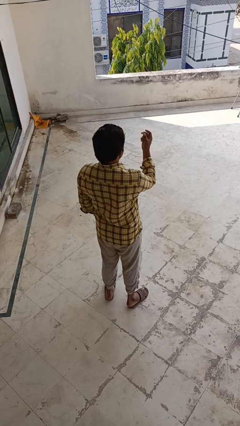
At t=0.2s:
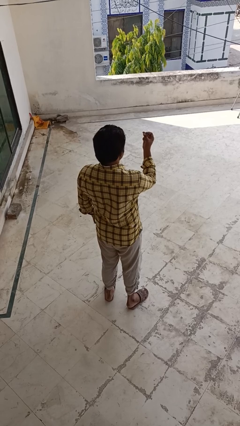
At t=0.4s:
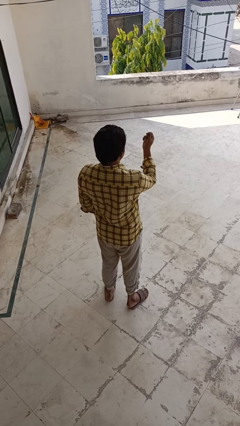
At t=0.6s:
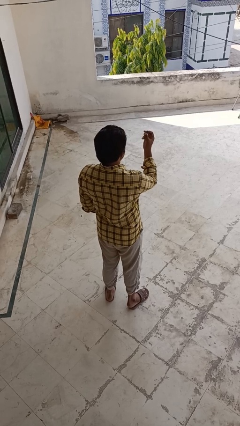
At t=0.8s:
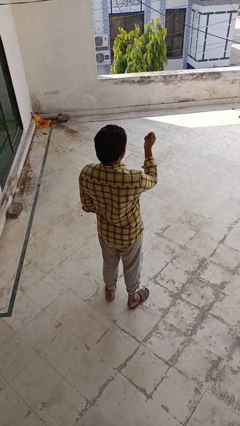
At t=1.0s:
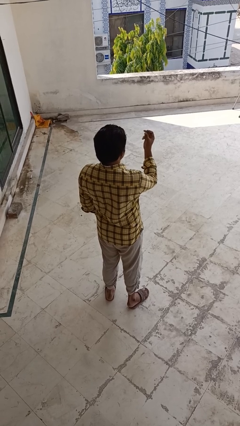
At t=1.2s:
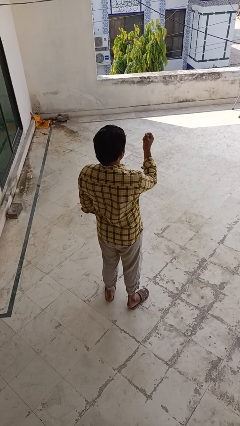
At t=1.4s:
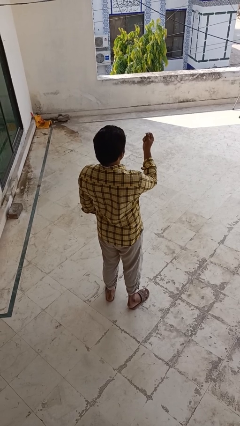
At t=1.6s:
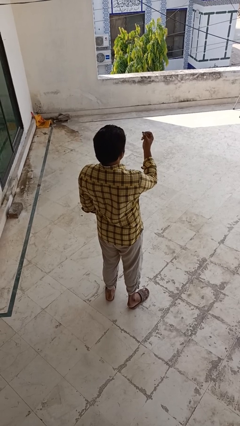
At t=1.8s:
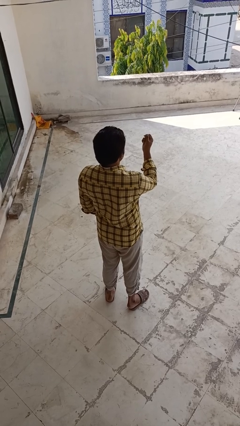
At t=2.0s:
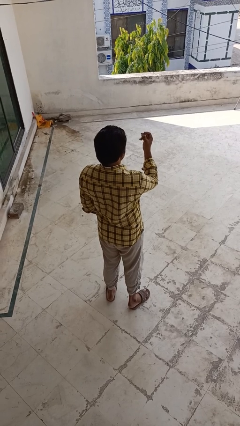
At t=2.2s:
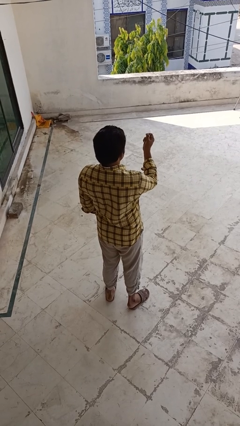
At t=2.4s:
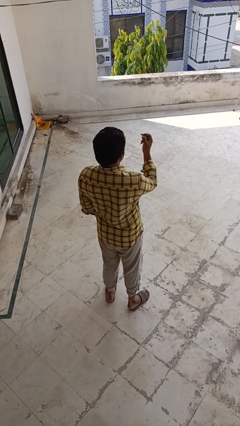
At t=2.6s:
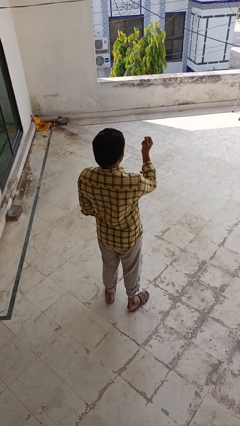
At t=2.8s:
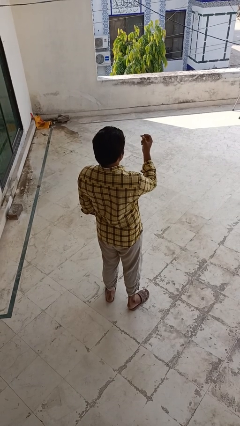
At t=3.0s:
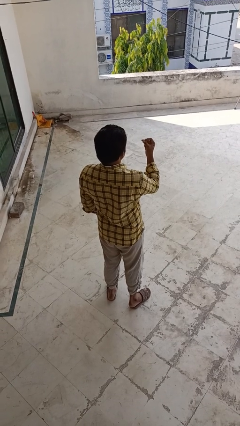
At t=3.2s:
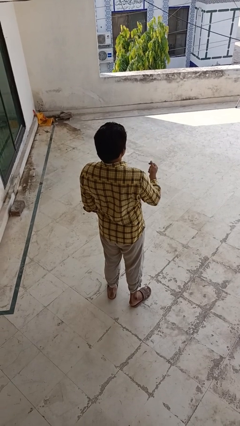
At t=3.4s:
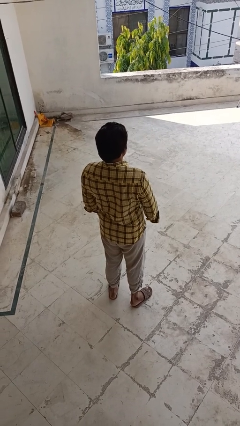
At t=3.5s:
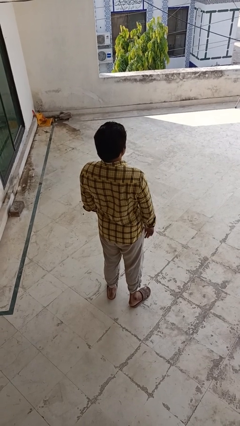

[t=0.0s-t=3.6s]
person snaps fingers

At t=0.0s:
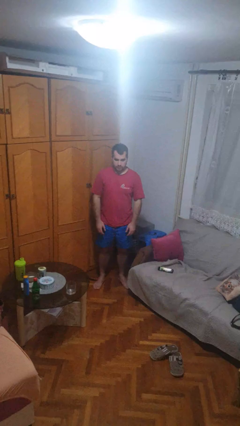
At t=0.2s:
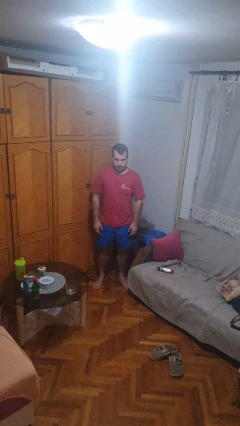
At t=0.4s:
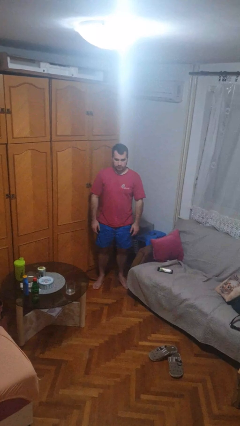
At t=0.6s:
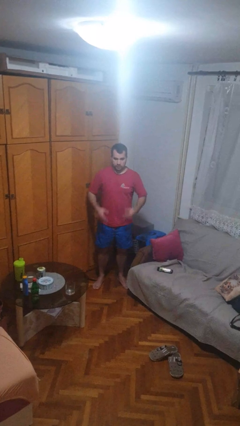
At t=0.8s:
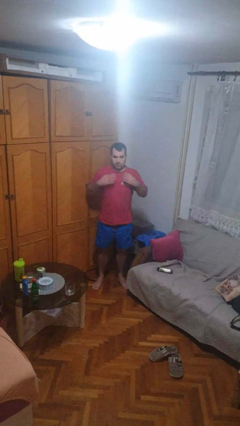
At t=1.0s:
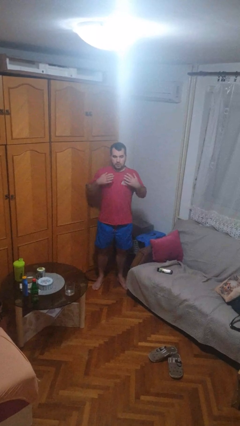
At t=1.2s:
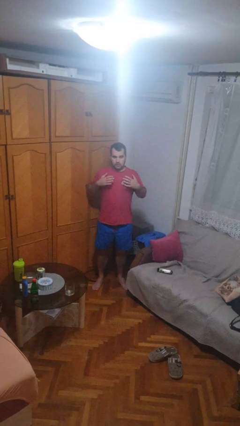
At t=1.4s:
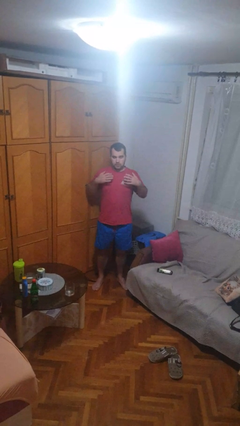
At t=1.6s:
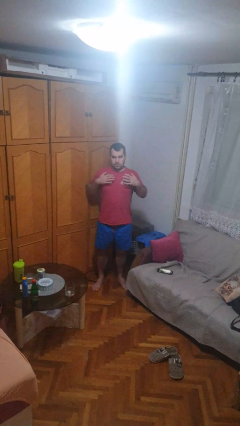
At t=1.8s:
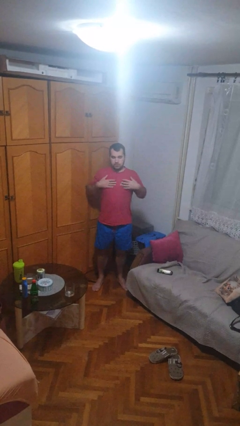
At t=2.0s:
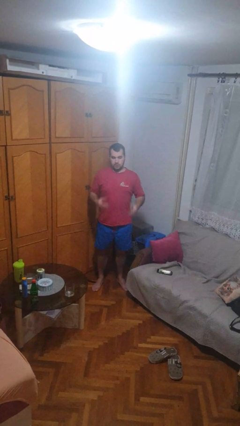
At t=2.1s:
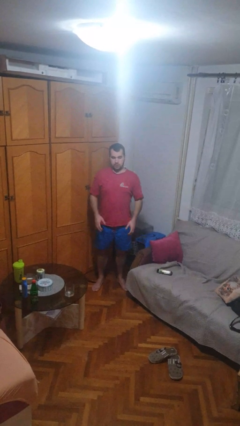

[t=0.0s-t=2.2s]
person drums on chest

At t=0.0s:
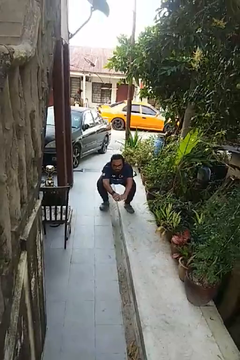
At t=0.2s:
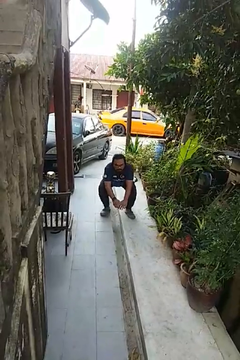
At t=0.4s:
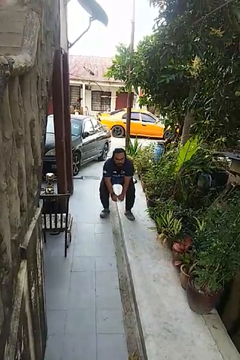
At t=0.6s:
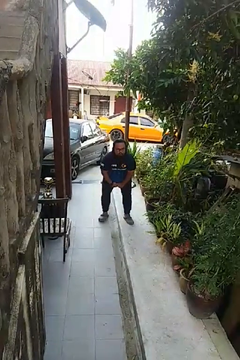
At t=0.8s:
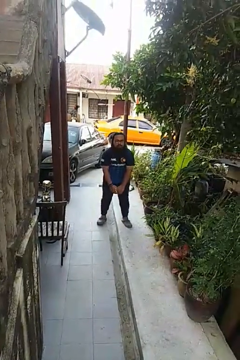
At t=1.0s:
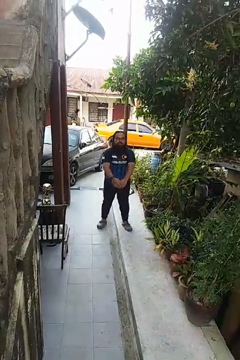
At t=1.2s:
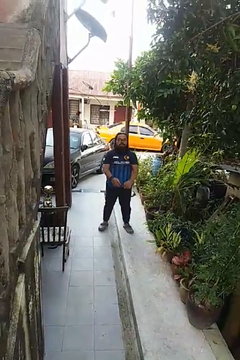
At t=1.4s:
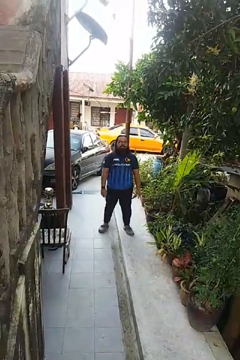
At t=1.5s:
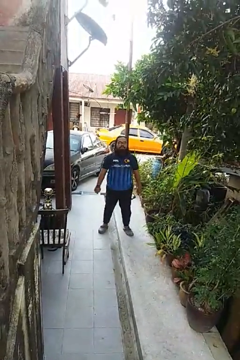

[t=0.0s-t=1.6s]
person stands up

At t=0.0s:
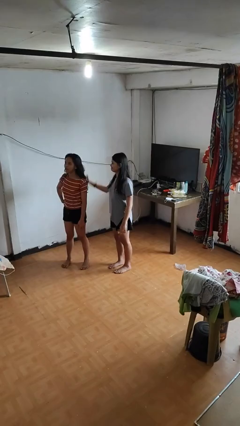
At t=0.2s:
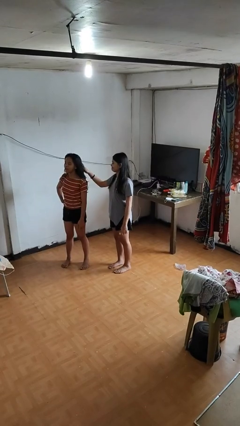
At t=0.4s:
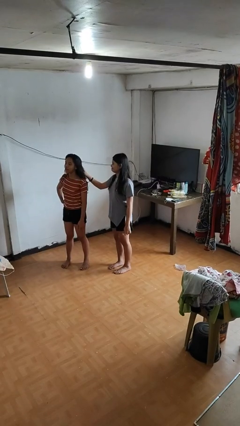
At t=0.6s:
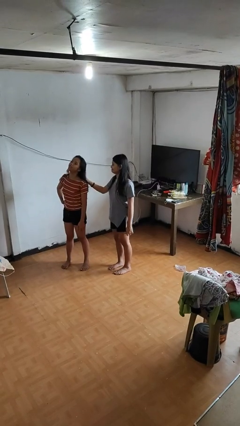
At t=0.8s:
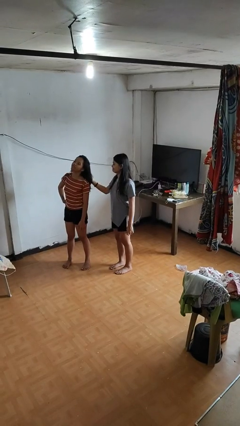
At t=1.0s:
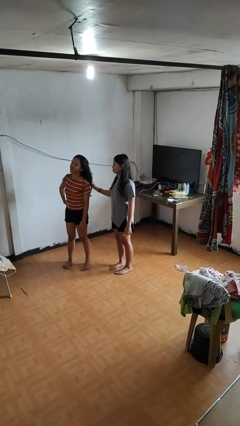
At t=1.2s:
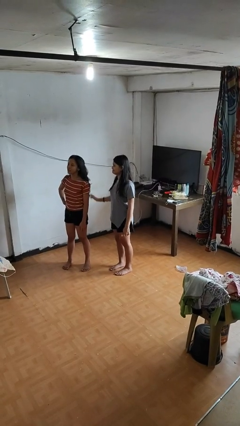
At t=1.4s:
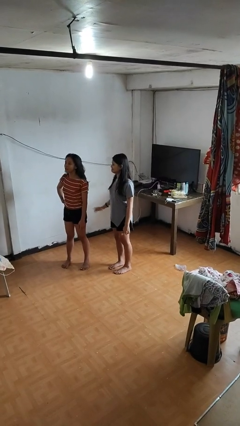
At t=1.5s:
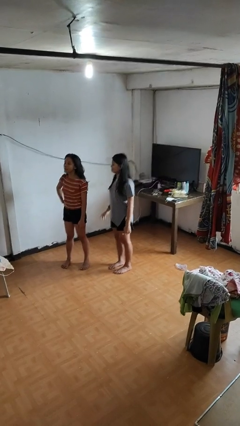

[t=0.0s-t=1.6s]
person grabs person by hair

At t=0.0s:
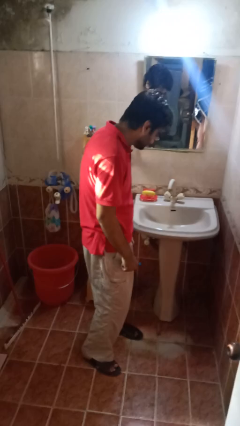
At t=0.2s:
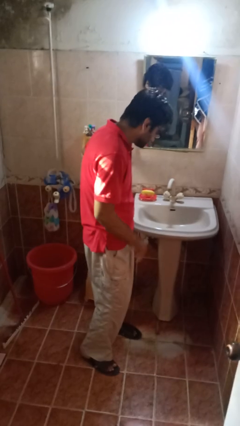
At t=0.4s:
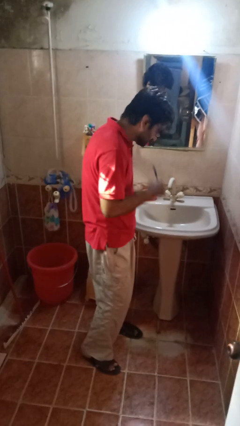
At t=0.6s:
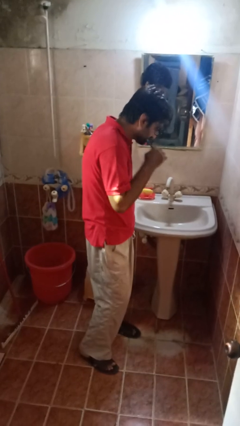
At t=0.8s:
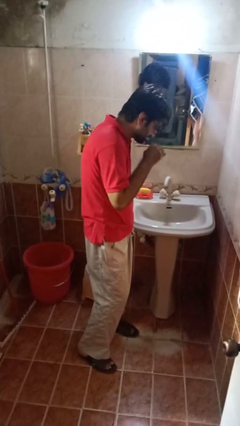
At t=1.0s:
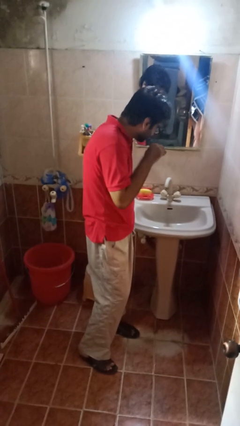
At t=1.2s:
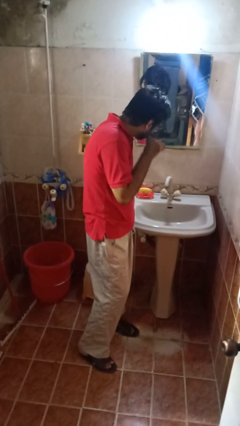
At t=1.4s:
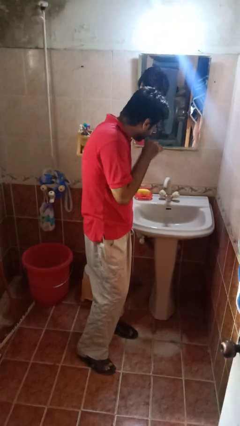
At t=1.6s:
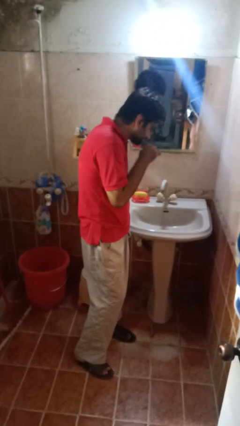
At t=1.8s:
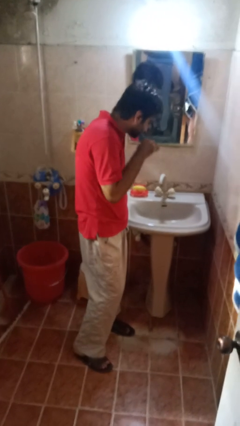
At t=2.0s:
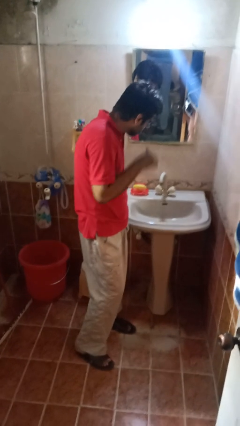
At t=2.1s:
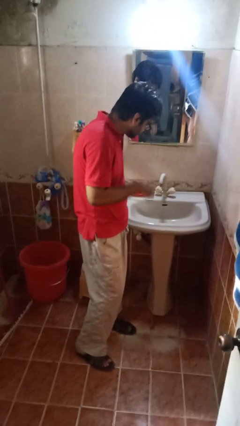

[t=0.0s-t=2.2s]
person brushes teeth

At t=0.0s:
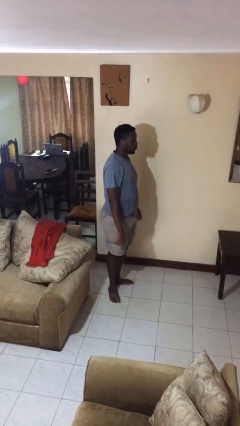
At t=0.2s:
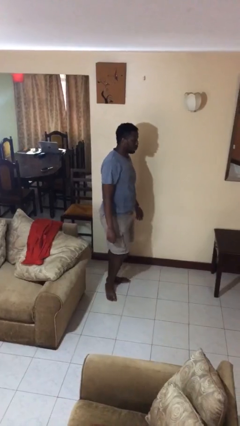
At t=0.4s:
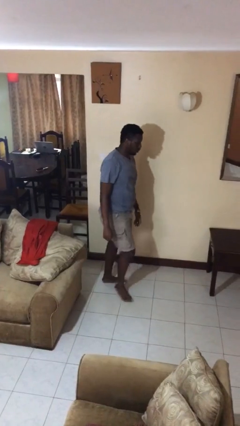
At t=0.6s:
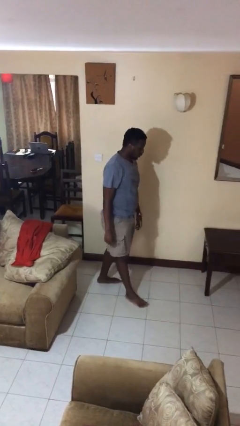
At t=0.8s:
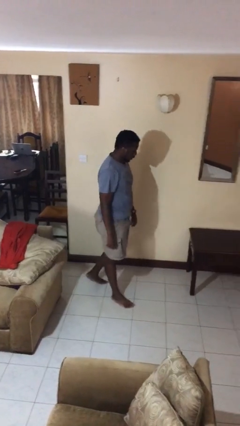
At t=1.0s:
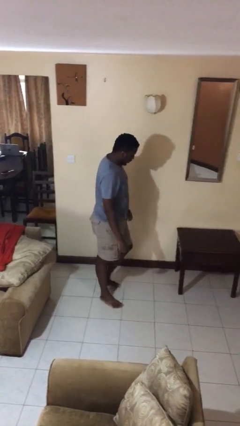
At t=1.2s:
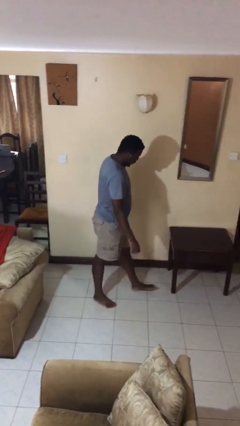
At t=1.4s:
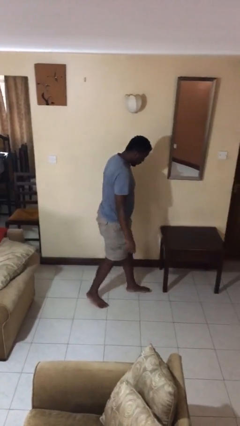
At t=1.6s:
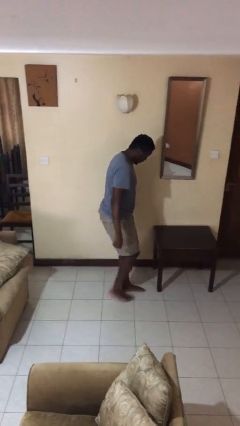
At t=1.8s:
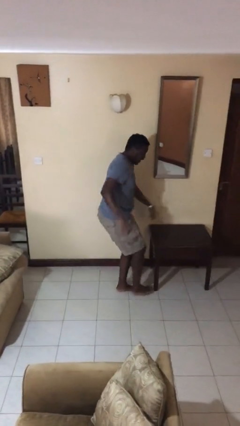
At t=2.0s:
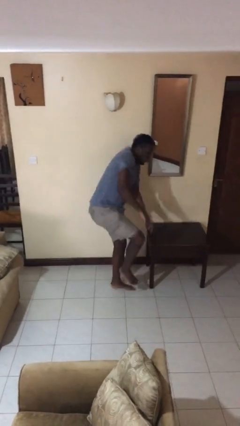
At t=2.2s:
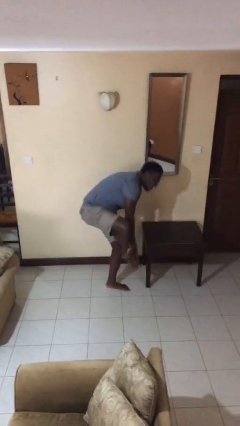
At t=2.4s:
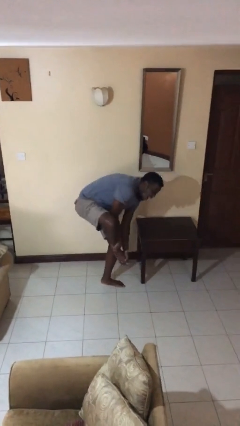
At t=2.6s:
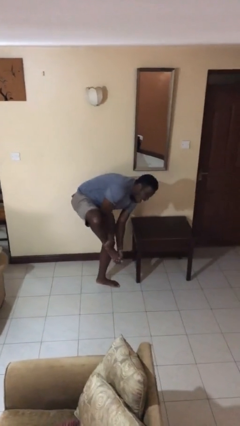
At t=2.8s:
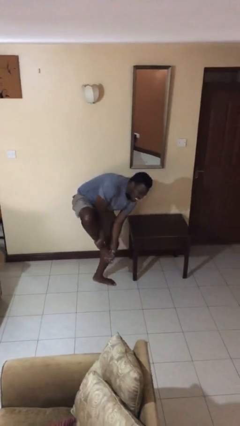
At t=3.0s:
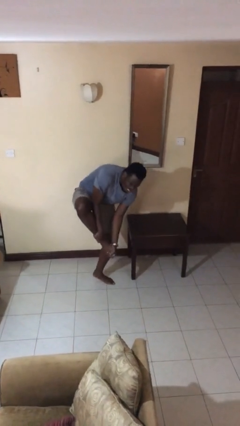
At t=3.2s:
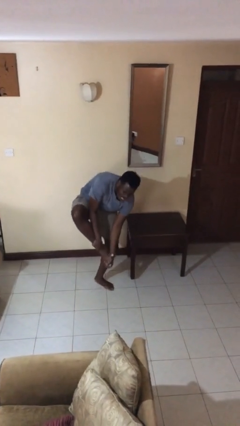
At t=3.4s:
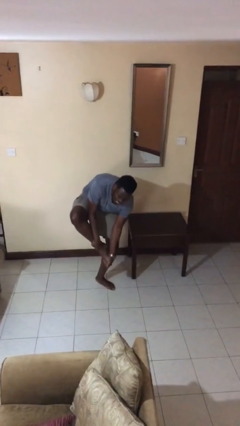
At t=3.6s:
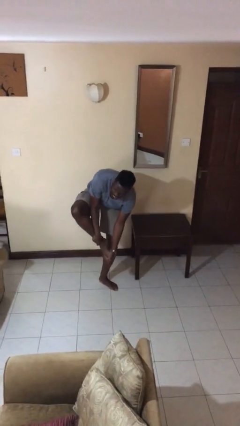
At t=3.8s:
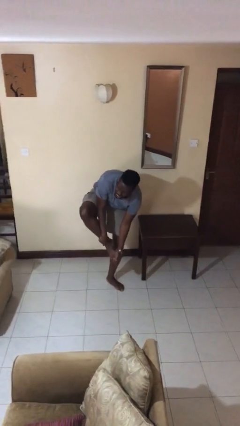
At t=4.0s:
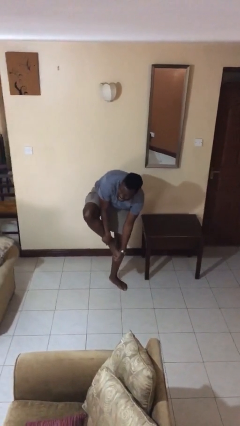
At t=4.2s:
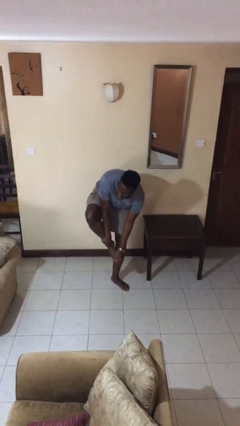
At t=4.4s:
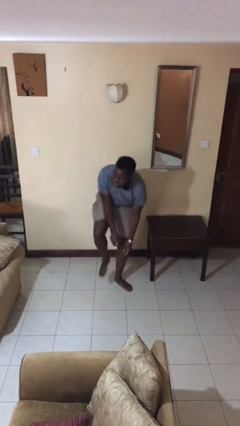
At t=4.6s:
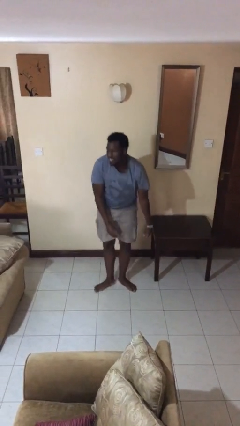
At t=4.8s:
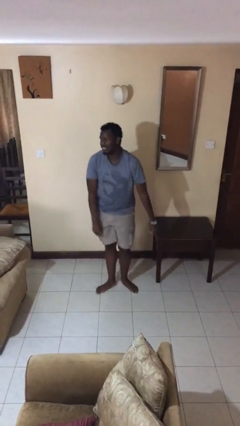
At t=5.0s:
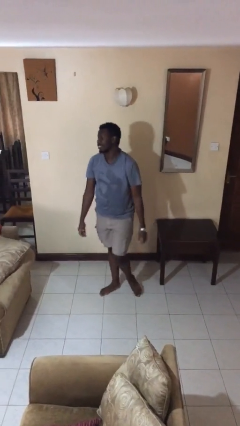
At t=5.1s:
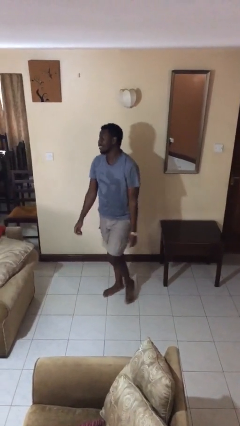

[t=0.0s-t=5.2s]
person stubs toe

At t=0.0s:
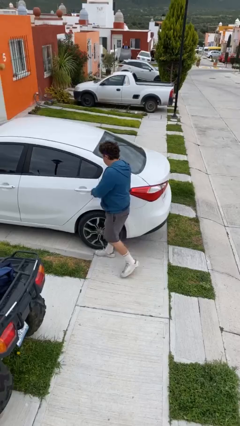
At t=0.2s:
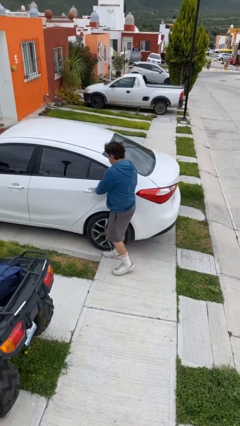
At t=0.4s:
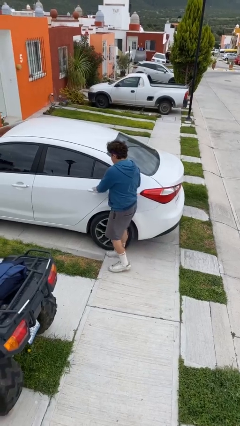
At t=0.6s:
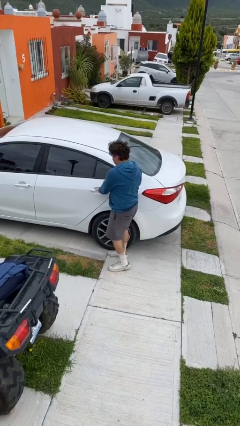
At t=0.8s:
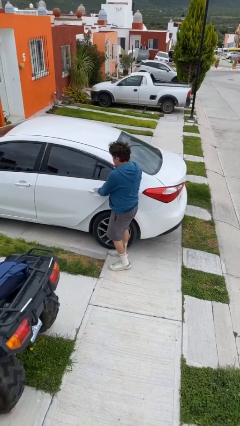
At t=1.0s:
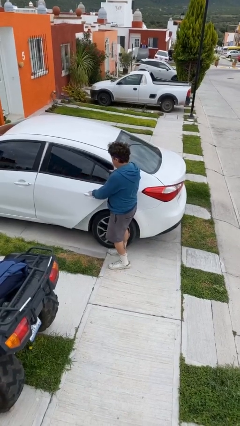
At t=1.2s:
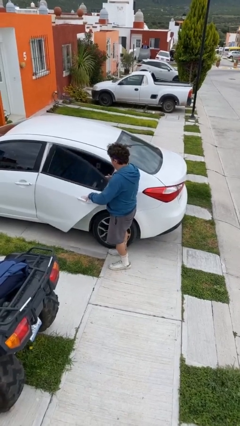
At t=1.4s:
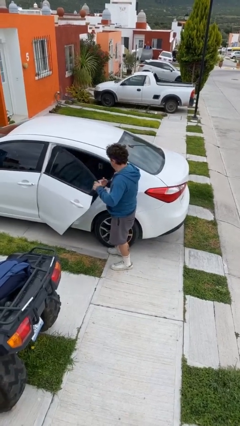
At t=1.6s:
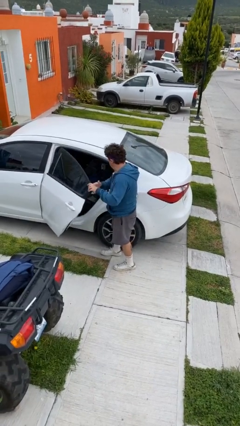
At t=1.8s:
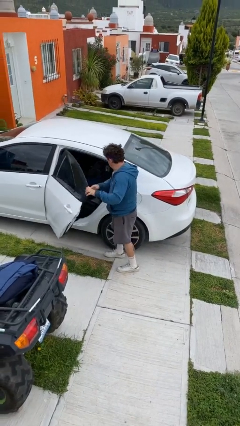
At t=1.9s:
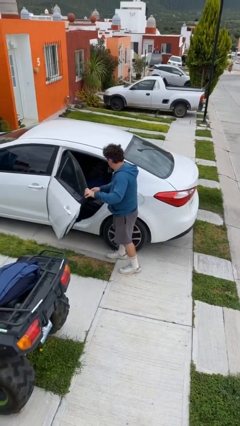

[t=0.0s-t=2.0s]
person opens car door
